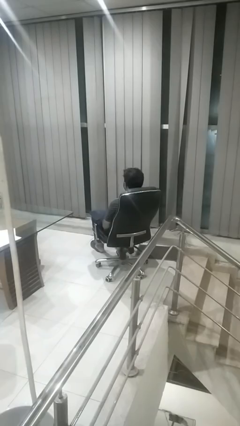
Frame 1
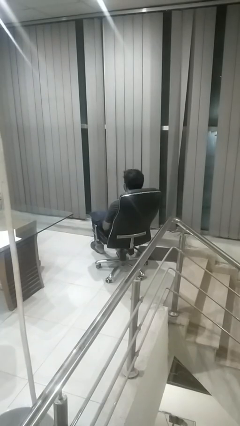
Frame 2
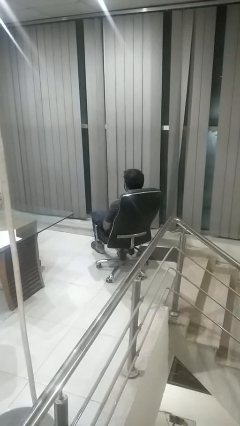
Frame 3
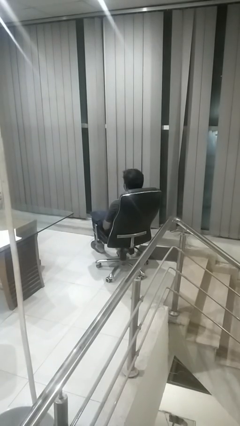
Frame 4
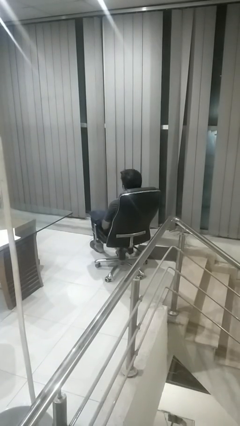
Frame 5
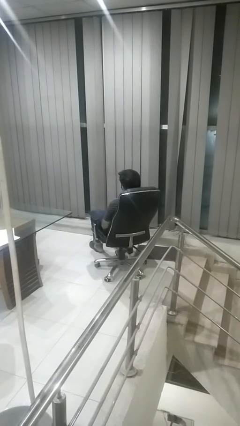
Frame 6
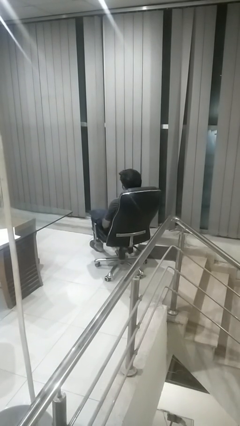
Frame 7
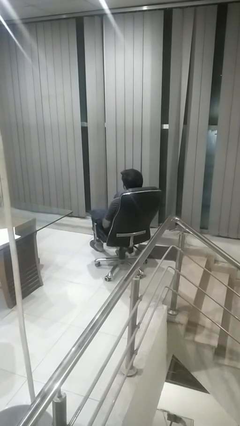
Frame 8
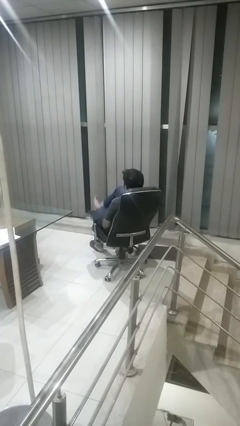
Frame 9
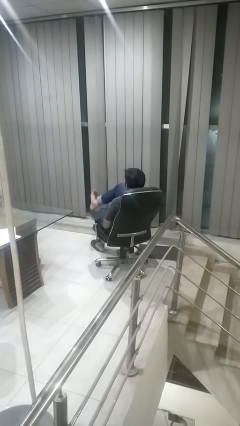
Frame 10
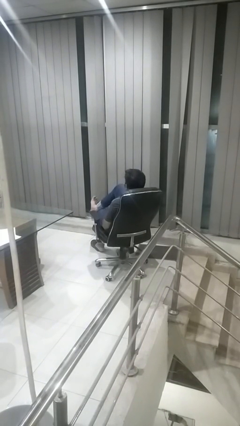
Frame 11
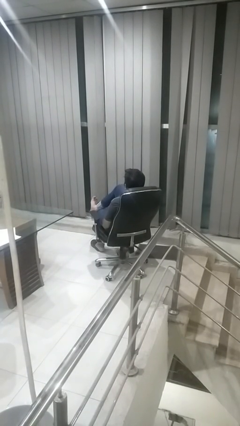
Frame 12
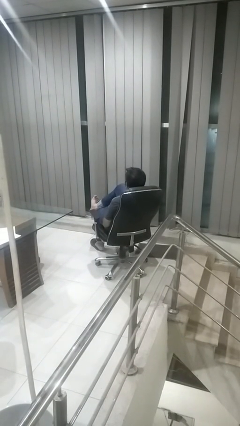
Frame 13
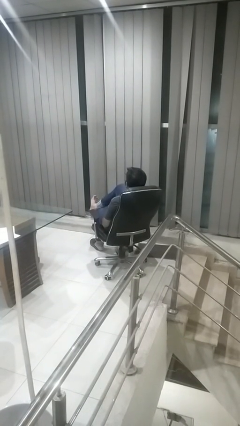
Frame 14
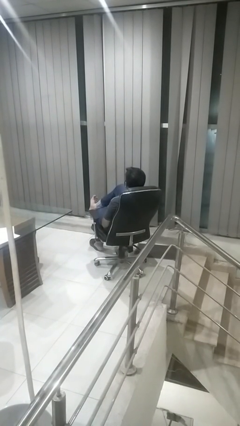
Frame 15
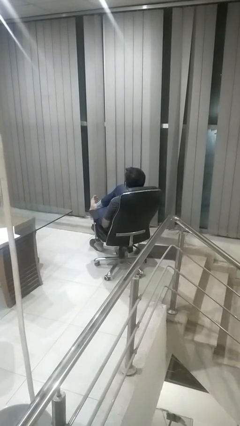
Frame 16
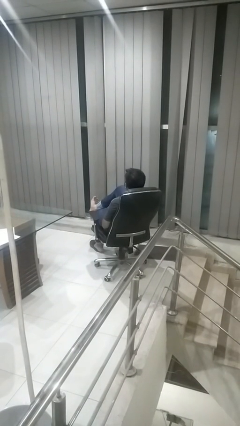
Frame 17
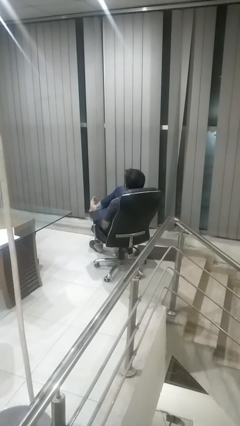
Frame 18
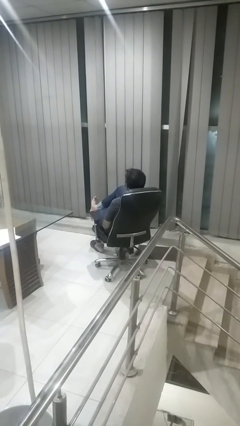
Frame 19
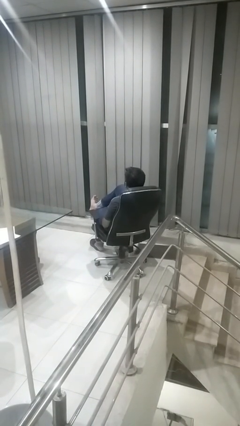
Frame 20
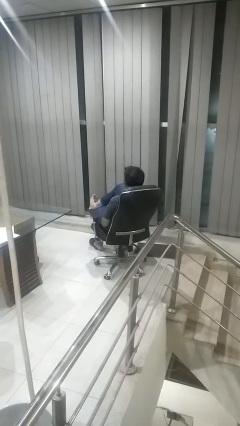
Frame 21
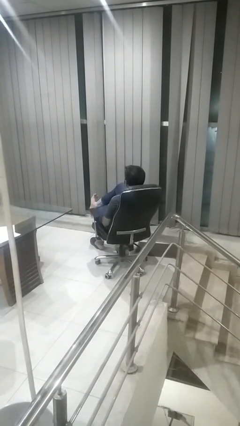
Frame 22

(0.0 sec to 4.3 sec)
person crosses legs

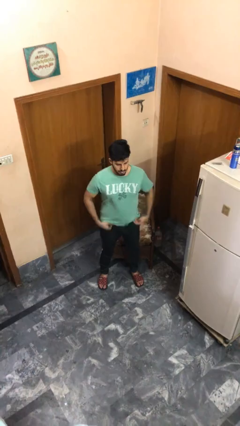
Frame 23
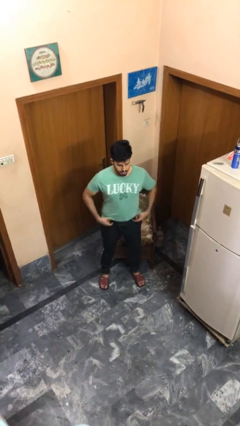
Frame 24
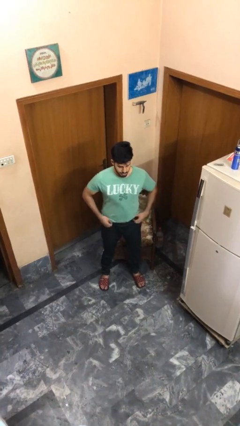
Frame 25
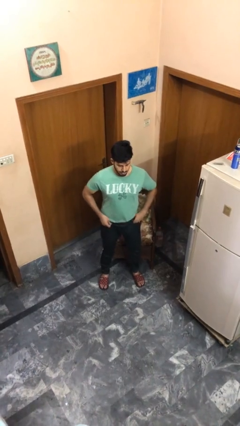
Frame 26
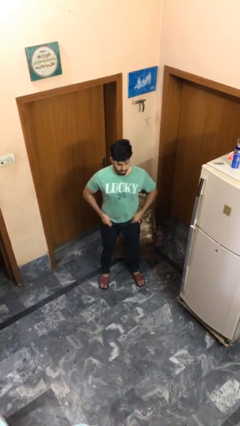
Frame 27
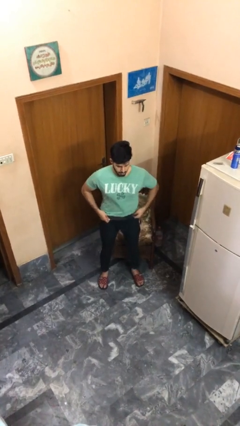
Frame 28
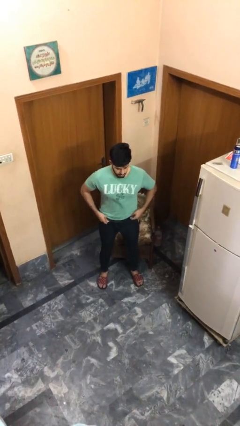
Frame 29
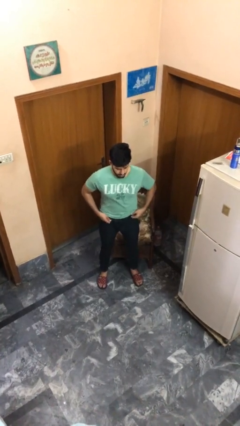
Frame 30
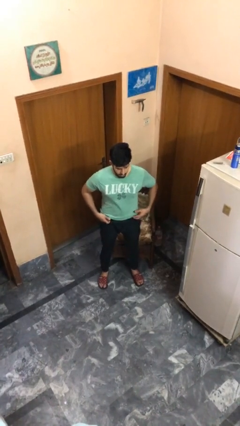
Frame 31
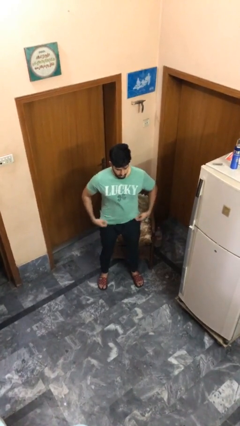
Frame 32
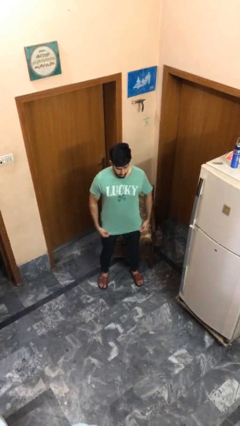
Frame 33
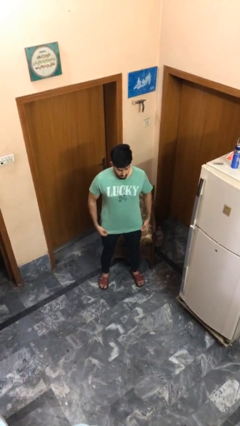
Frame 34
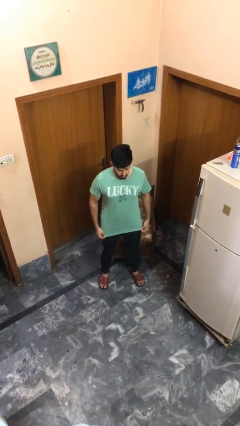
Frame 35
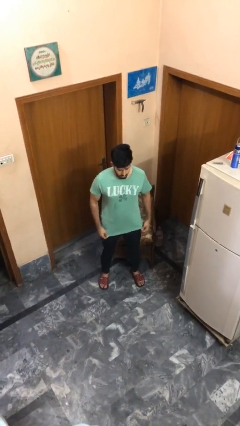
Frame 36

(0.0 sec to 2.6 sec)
person hikes up pants

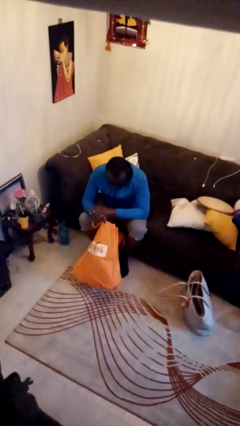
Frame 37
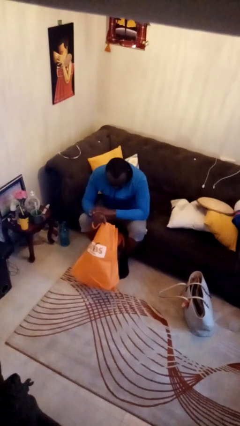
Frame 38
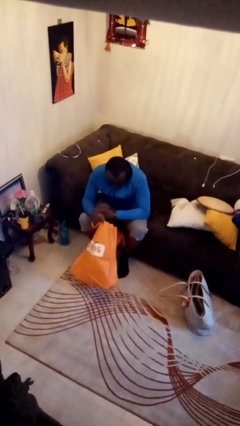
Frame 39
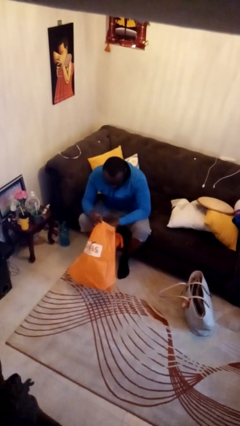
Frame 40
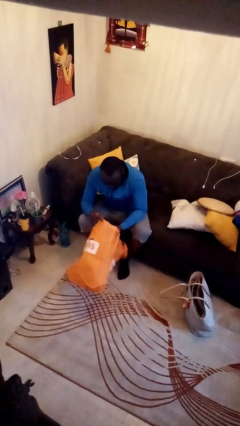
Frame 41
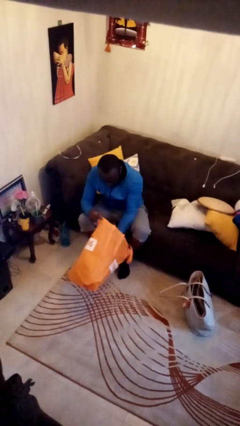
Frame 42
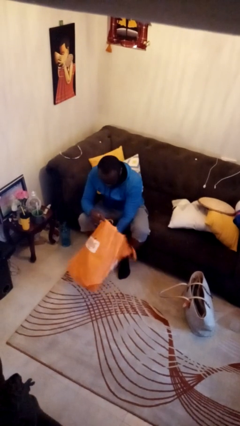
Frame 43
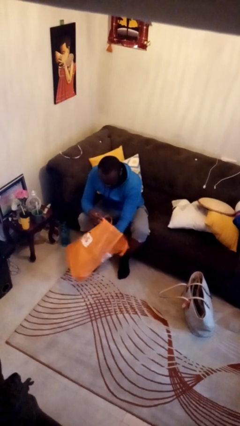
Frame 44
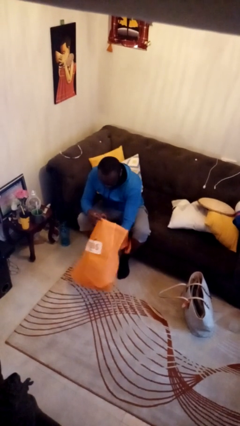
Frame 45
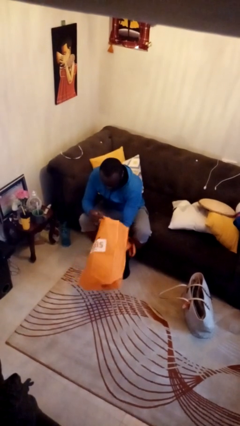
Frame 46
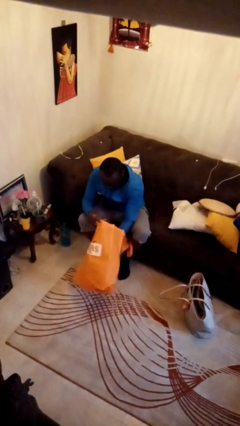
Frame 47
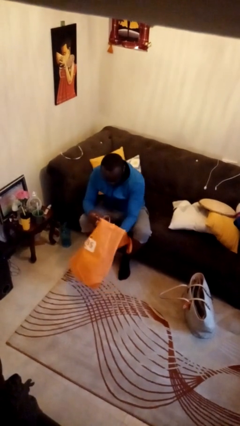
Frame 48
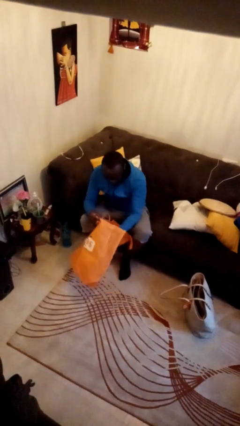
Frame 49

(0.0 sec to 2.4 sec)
person searches in bag

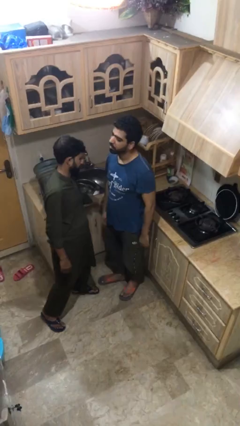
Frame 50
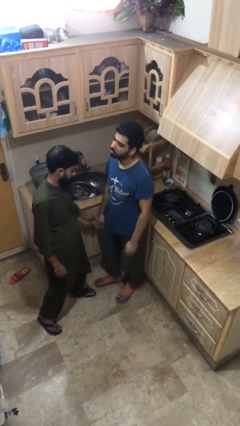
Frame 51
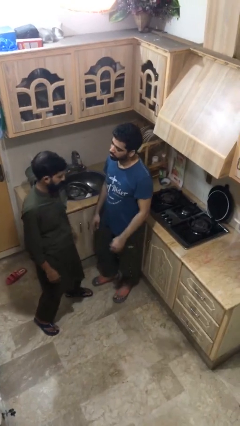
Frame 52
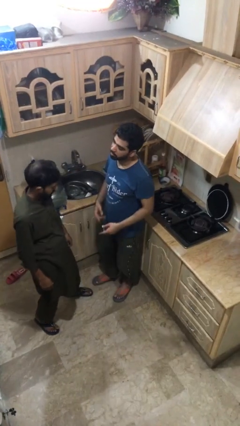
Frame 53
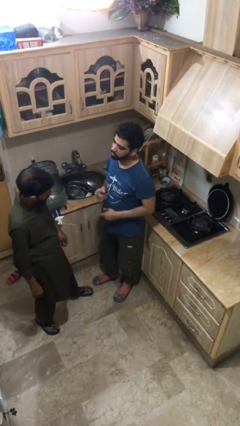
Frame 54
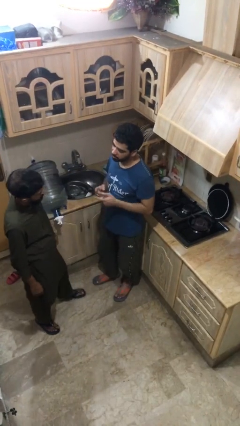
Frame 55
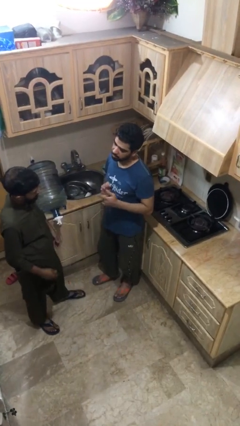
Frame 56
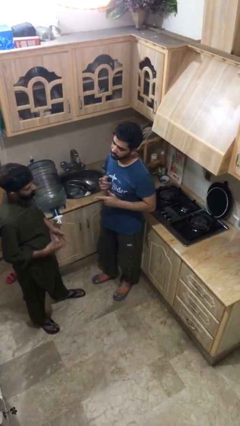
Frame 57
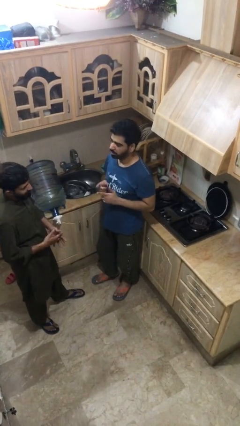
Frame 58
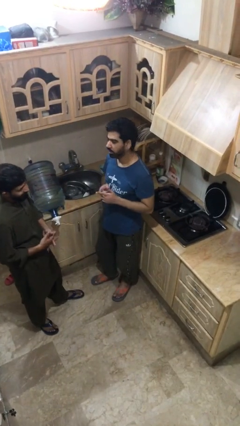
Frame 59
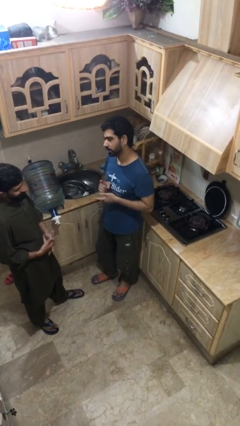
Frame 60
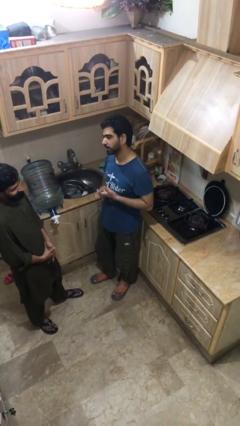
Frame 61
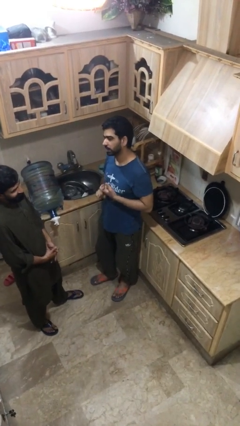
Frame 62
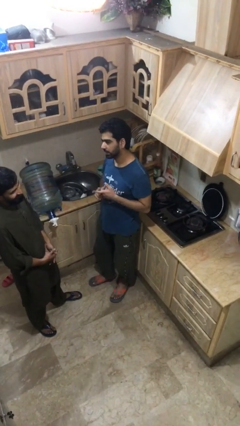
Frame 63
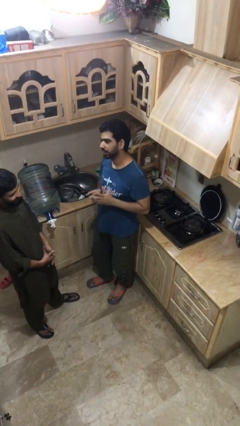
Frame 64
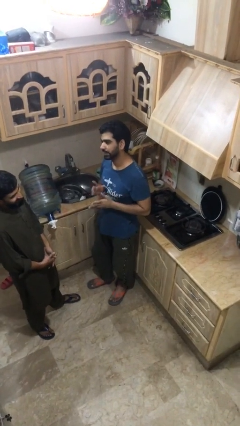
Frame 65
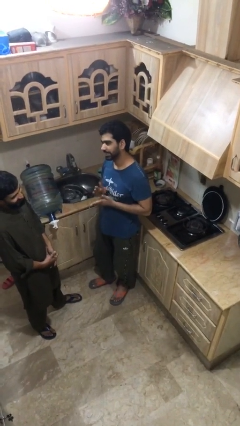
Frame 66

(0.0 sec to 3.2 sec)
person talks to person

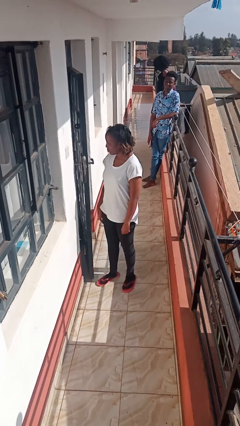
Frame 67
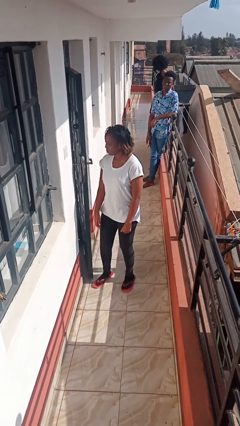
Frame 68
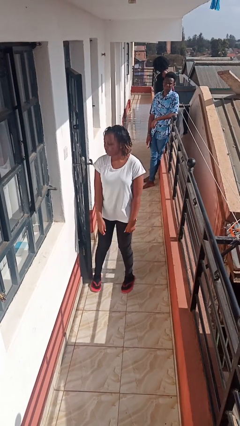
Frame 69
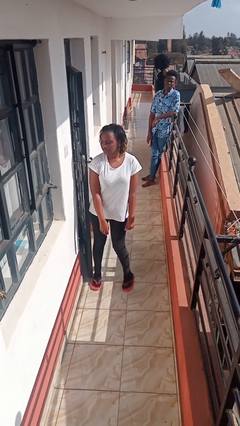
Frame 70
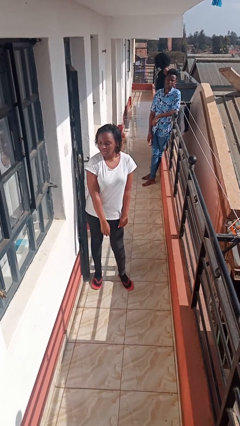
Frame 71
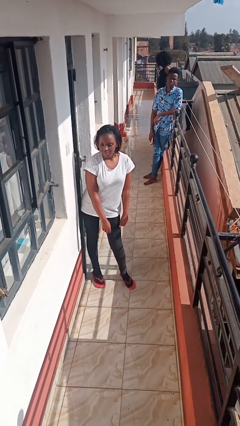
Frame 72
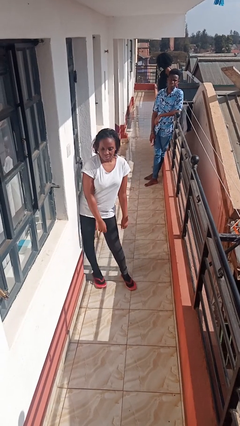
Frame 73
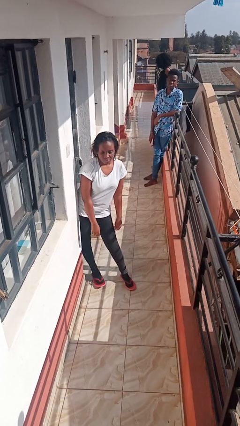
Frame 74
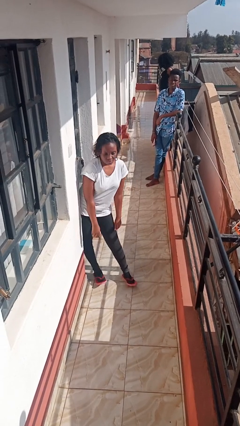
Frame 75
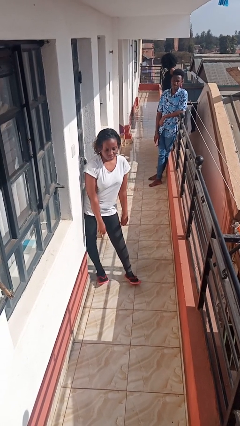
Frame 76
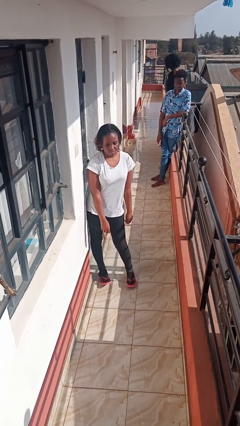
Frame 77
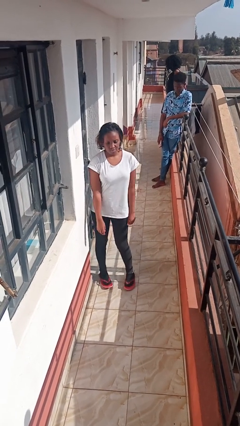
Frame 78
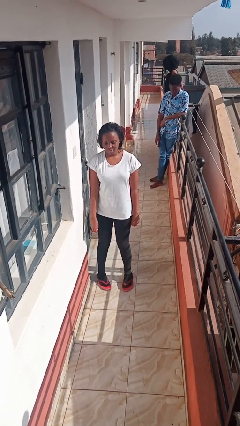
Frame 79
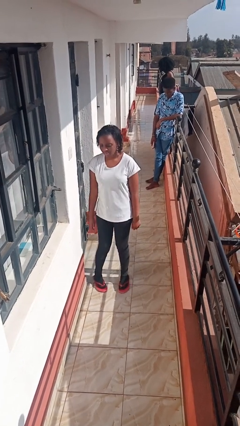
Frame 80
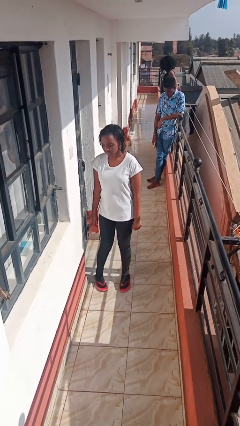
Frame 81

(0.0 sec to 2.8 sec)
person closes door with hip

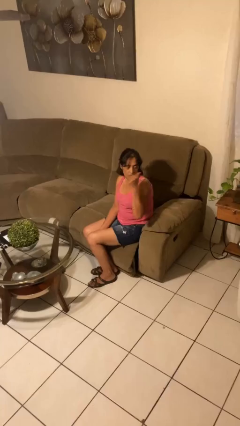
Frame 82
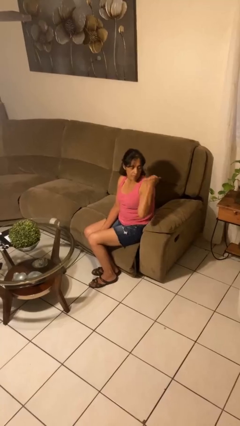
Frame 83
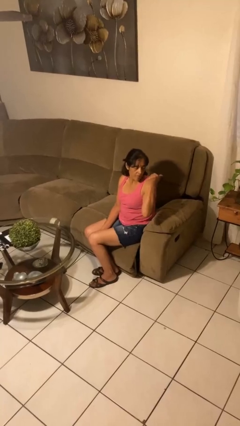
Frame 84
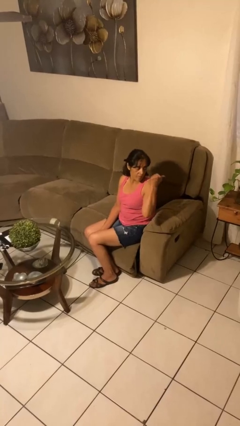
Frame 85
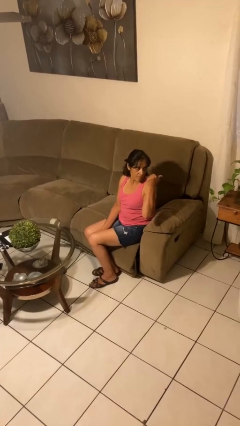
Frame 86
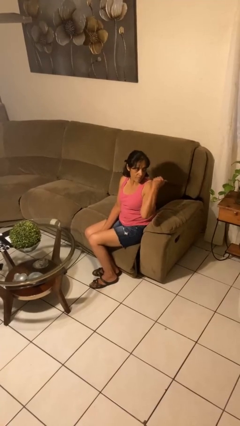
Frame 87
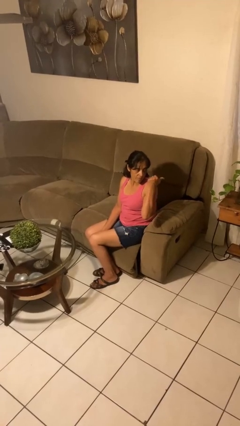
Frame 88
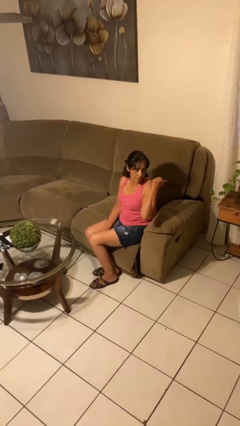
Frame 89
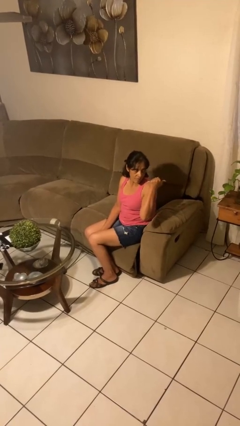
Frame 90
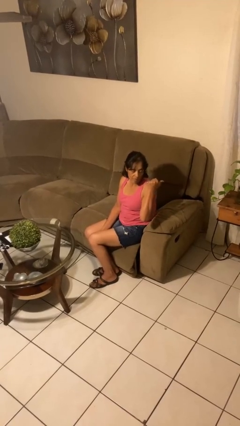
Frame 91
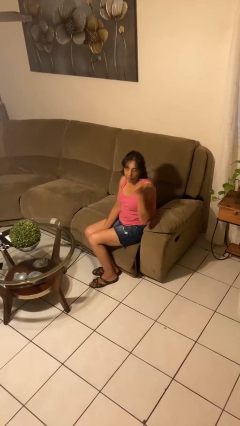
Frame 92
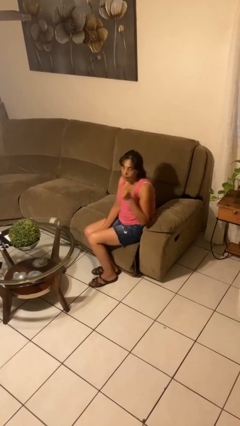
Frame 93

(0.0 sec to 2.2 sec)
person gestures behind me

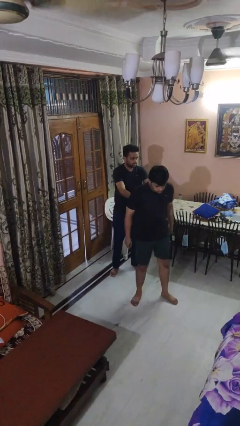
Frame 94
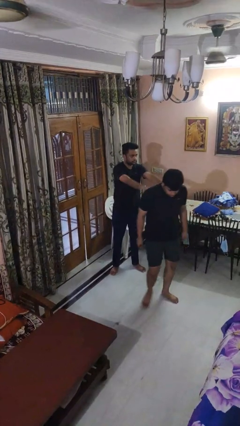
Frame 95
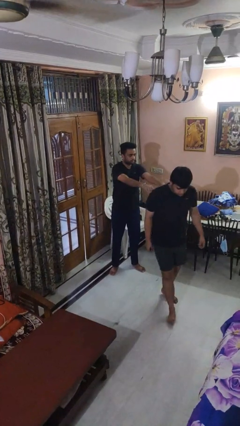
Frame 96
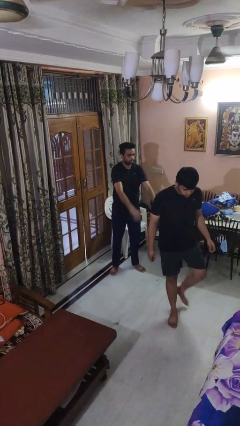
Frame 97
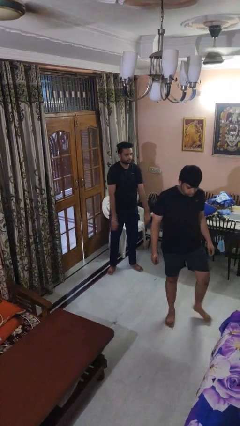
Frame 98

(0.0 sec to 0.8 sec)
person shoves person
